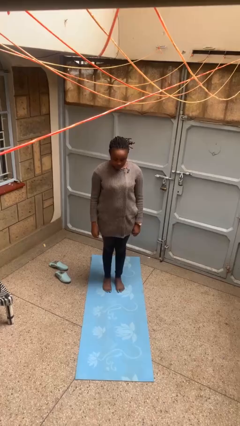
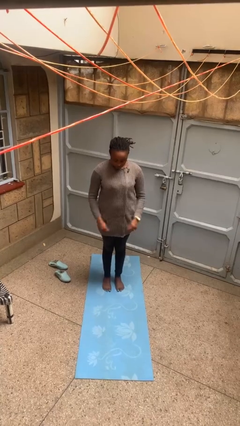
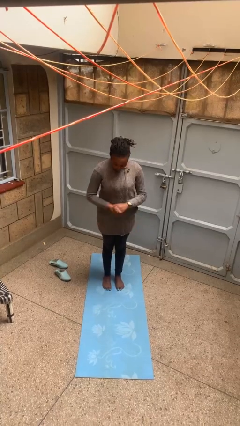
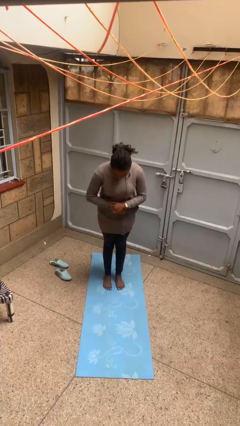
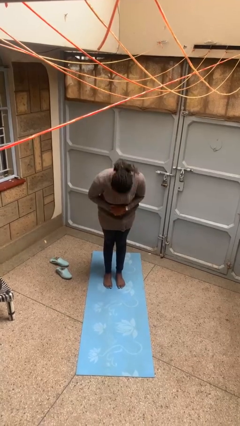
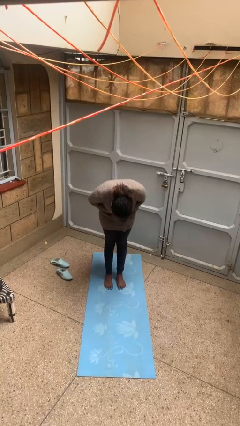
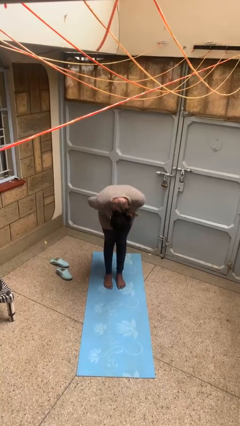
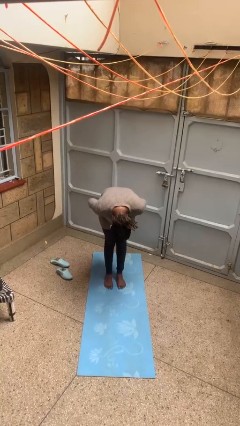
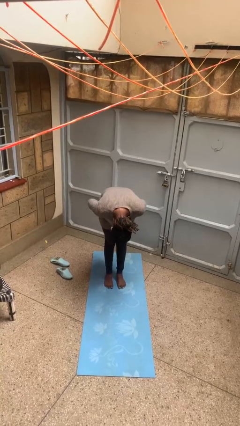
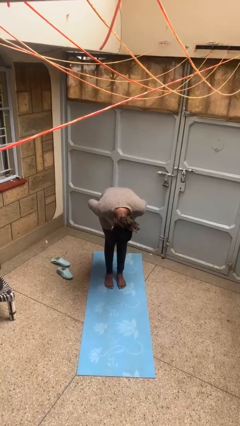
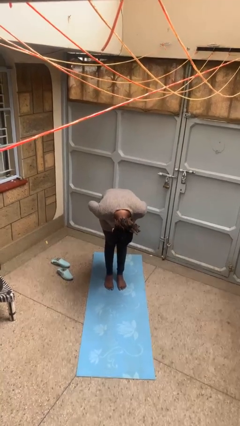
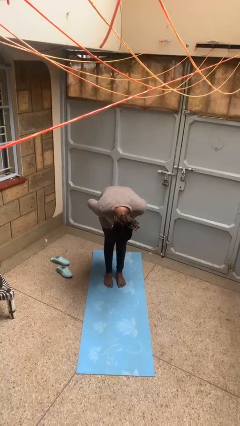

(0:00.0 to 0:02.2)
person bows

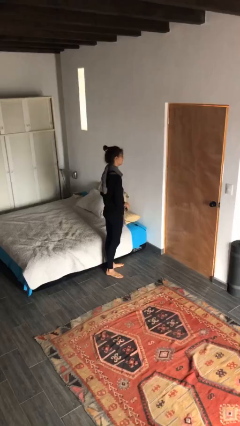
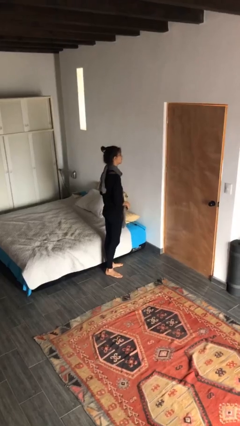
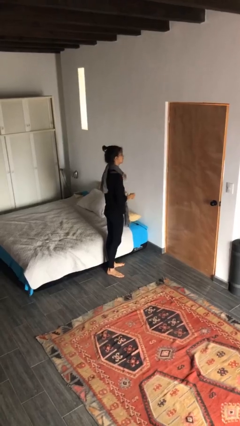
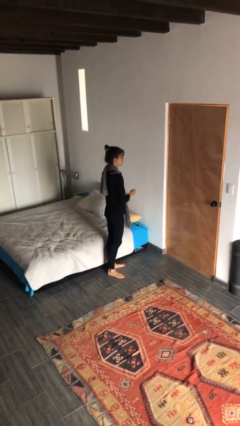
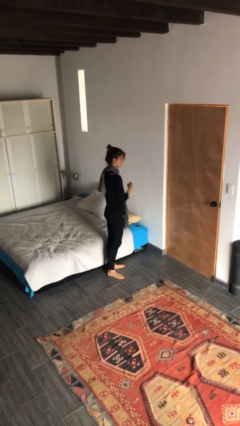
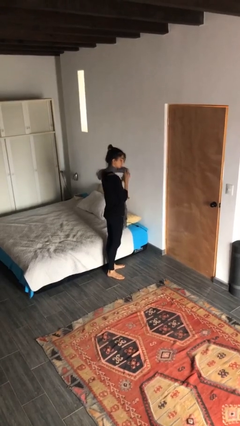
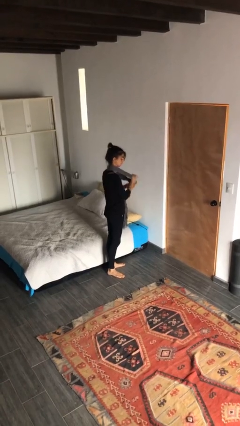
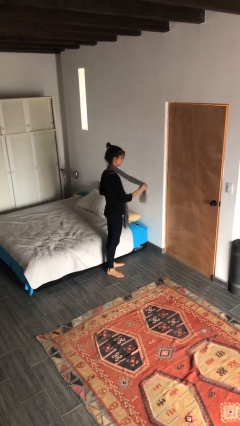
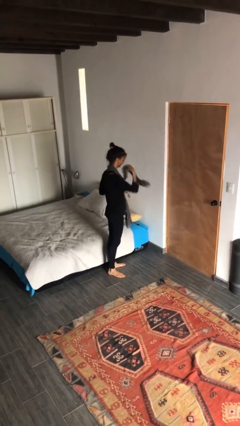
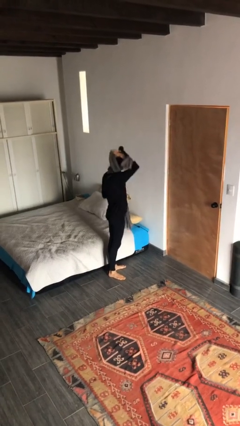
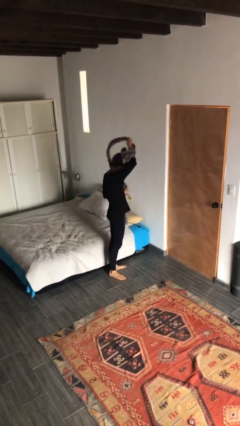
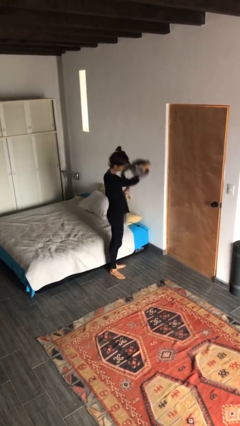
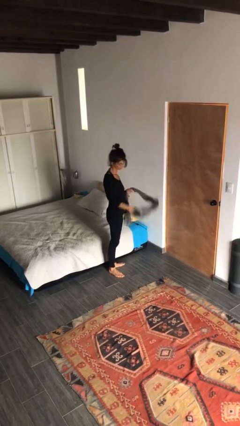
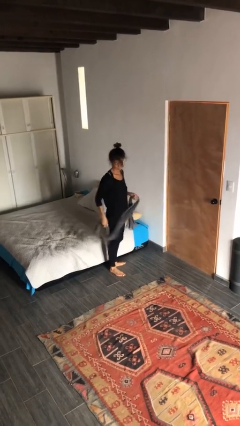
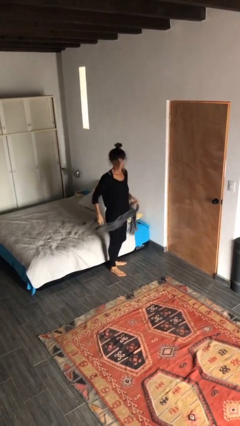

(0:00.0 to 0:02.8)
person takes off scarf

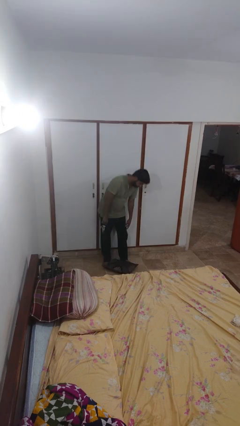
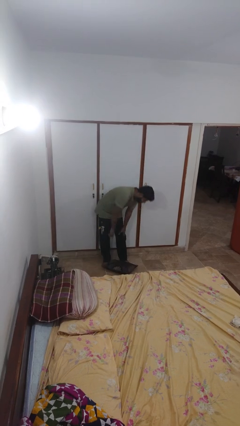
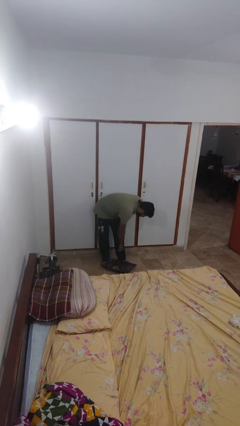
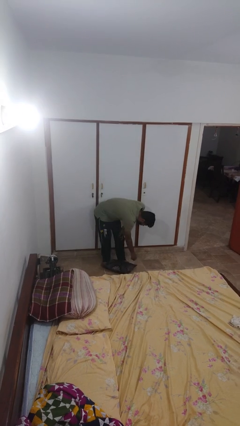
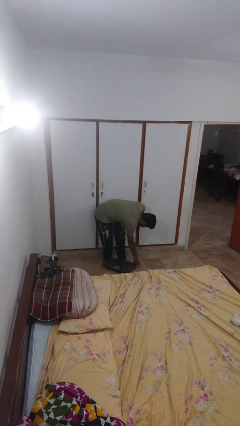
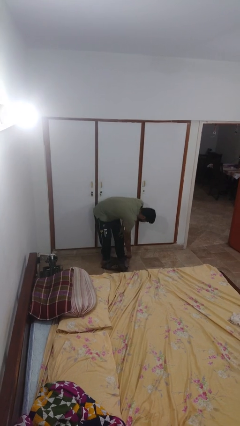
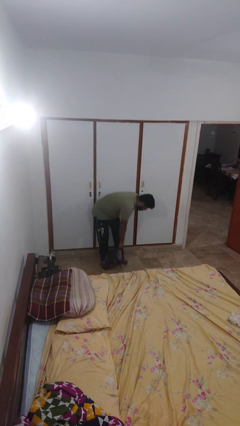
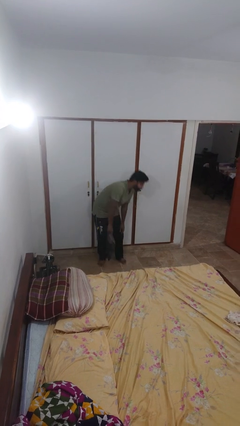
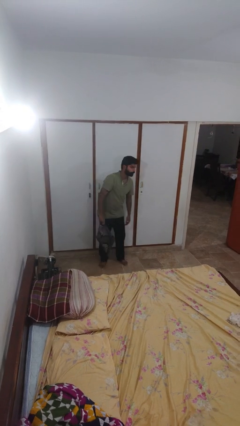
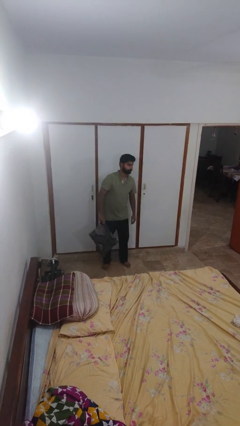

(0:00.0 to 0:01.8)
person picks up object from floor

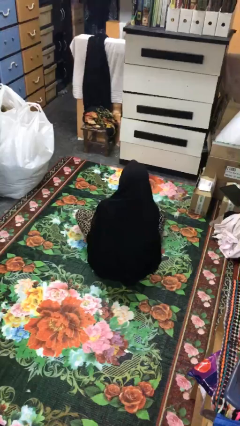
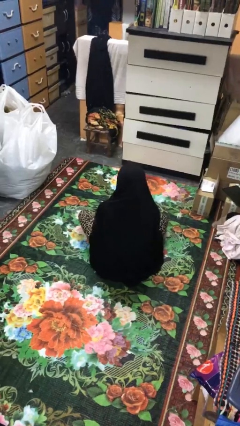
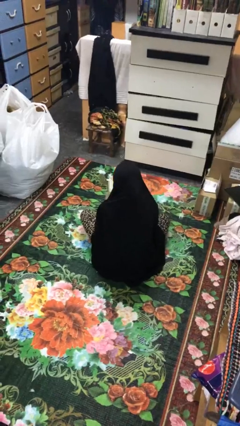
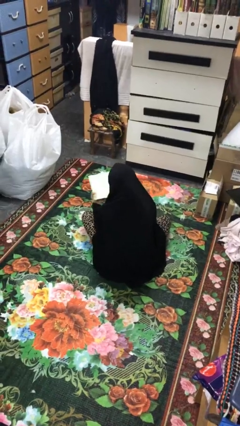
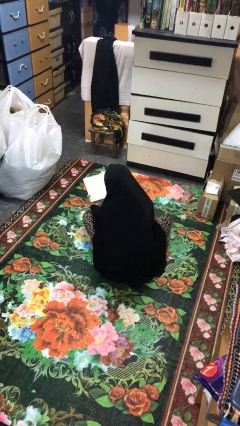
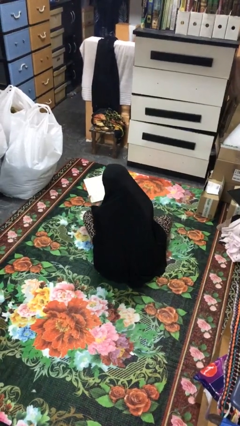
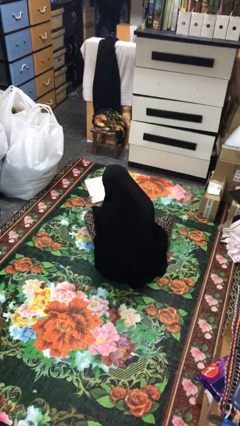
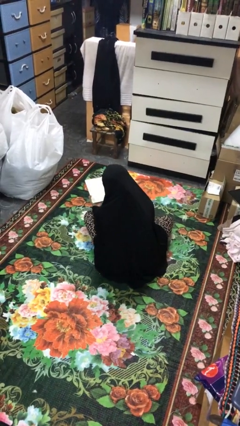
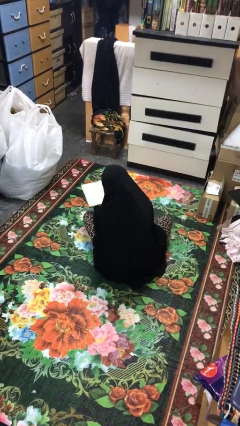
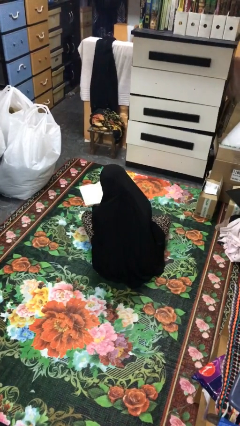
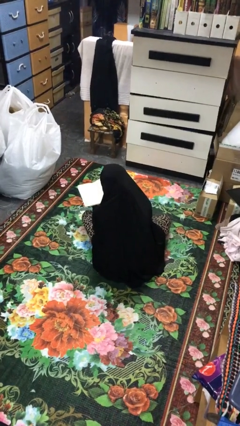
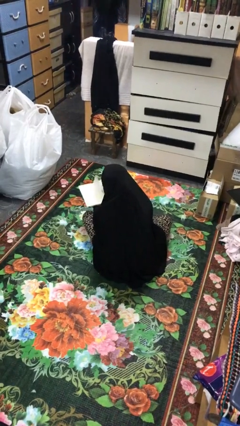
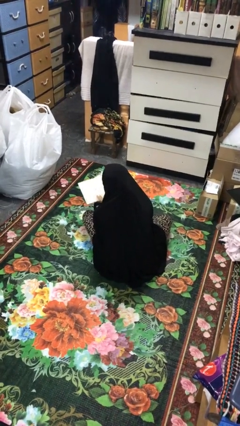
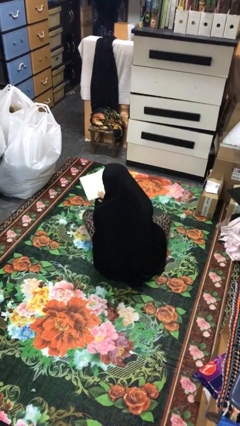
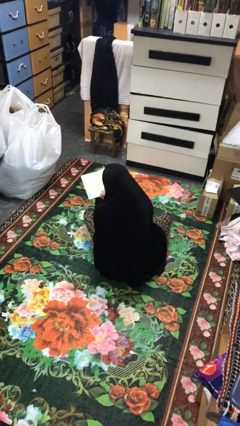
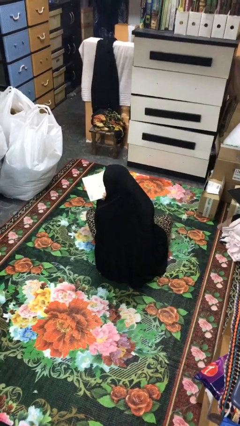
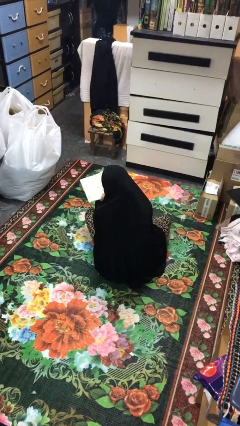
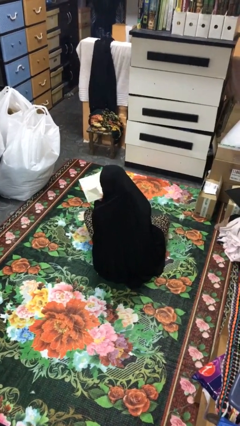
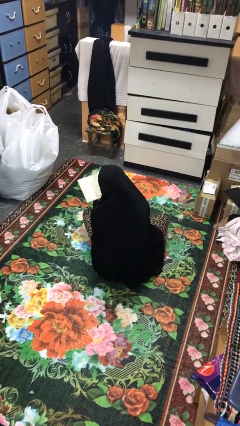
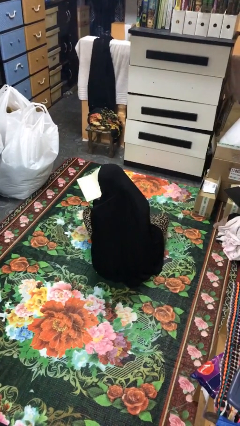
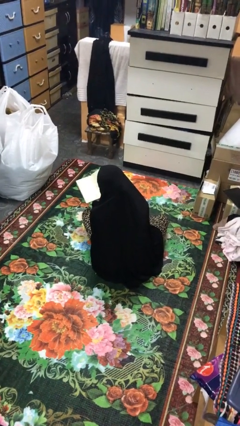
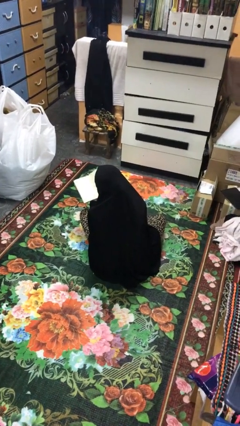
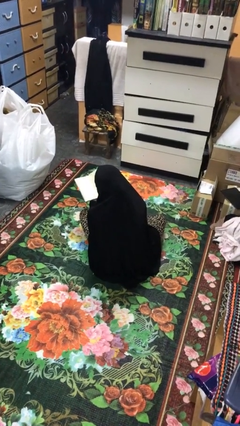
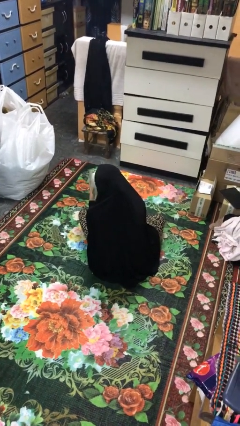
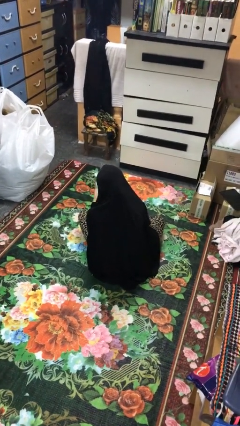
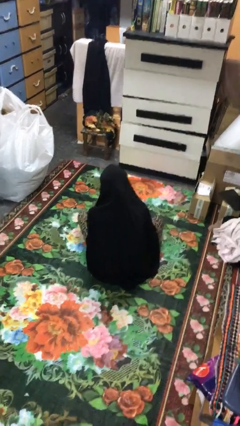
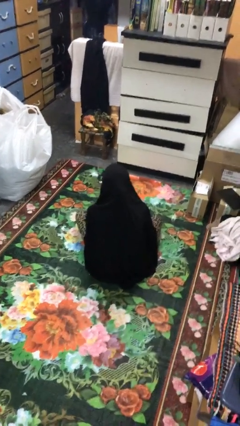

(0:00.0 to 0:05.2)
person reads book

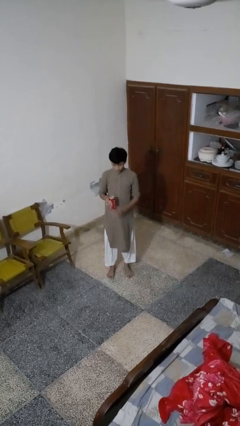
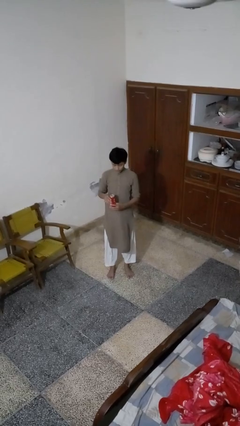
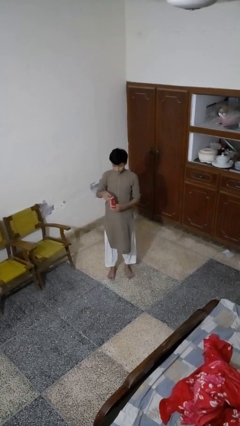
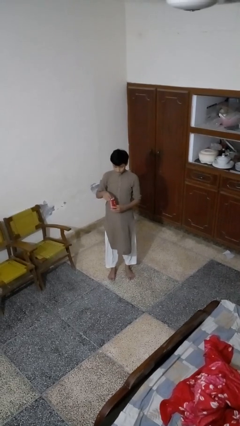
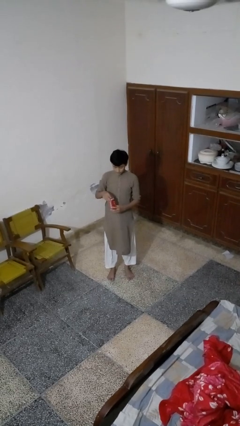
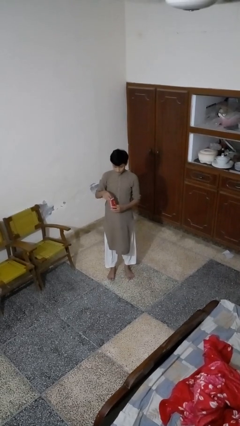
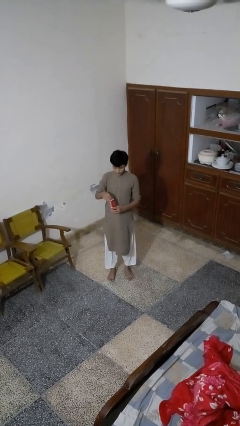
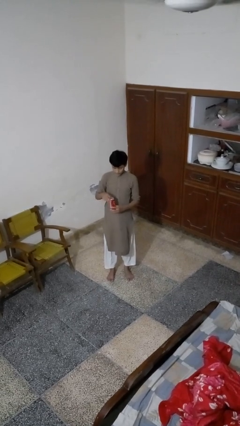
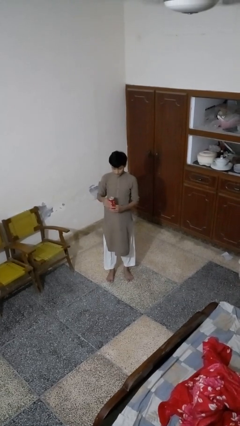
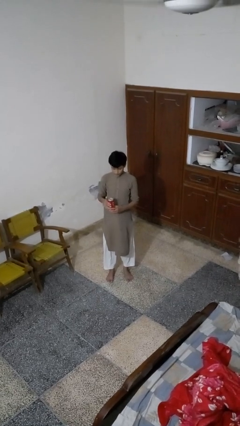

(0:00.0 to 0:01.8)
person opens beverage can

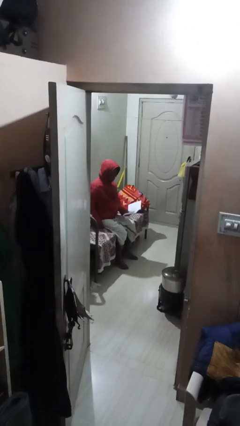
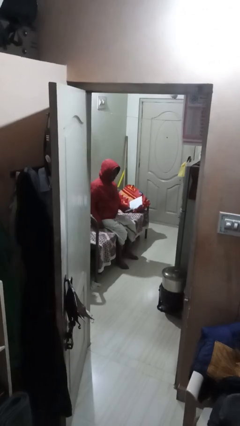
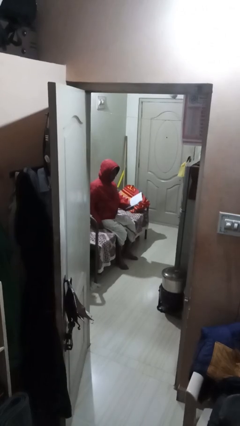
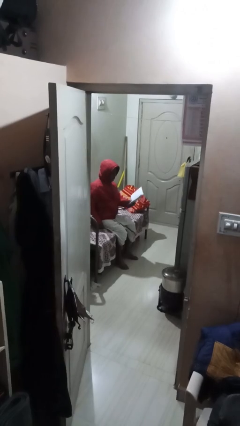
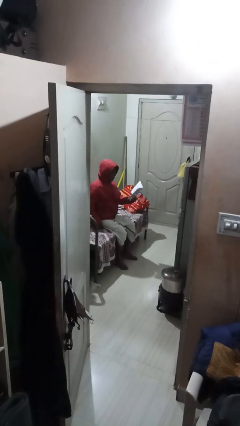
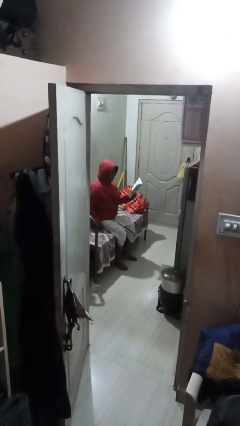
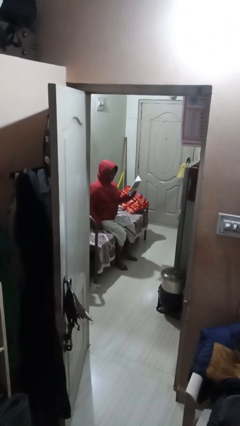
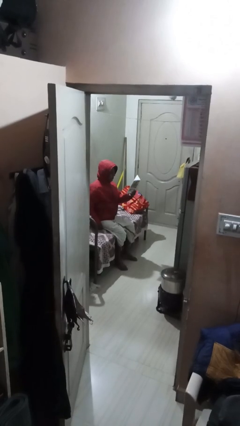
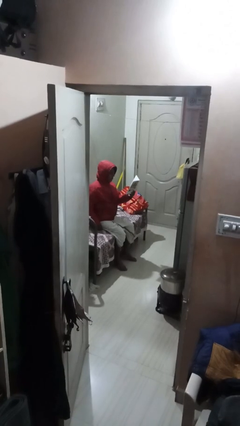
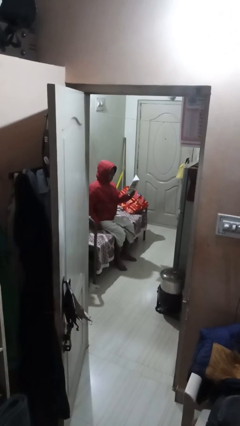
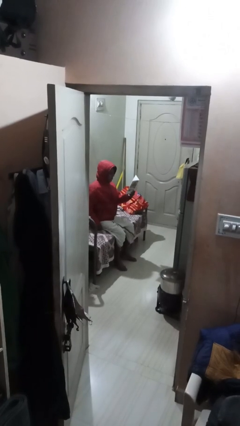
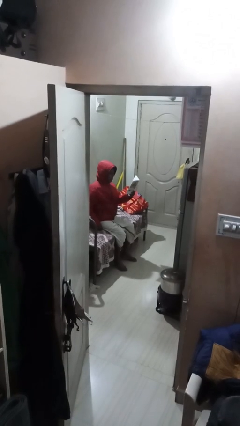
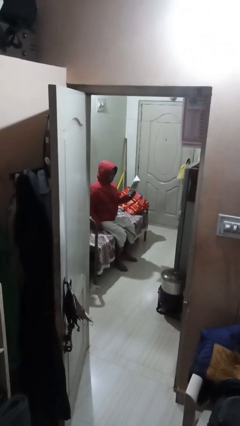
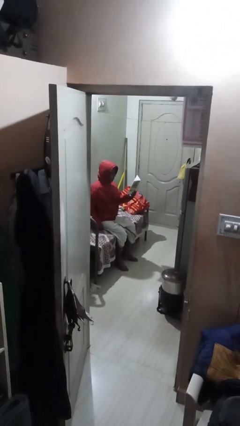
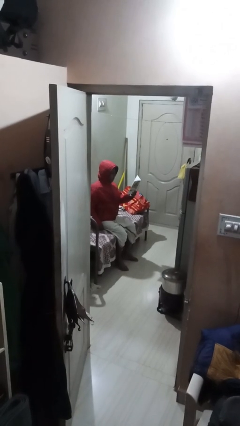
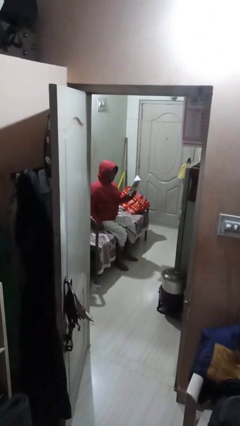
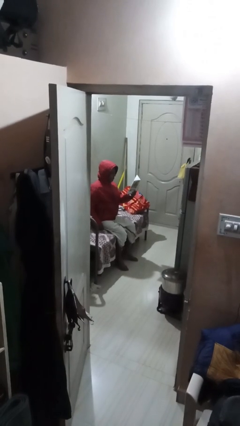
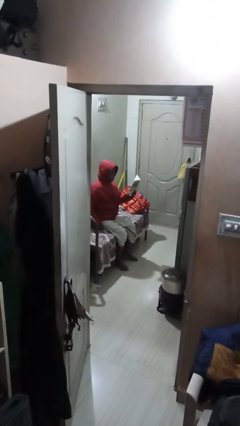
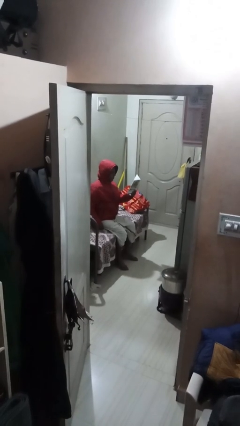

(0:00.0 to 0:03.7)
person reads document
